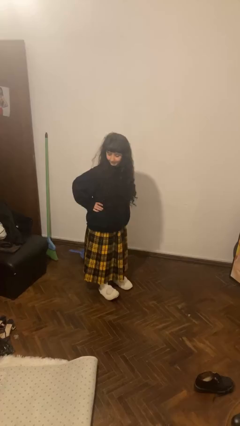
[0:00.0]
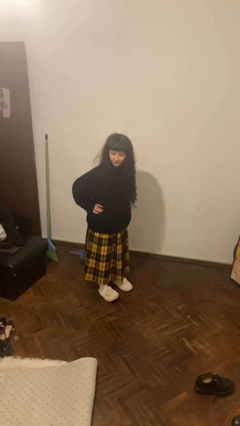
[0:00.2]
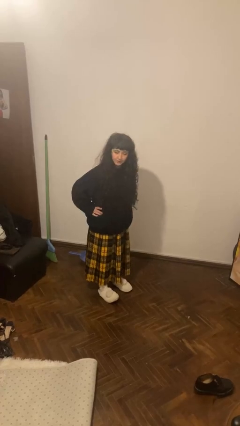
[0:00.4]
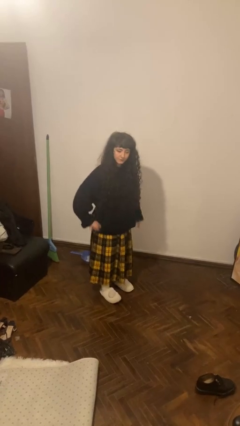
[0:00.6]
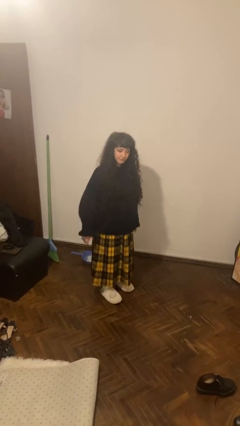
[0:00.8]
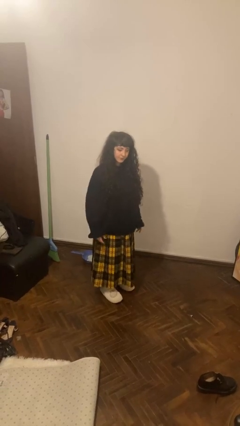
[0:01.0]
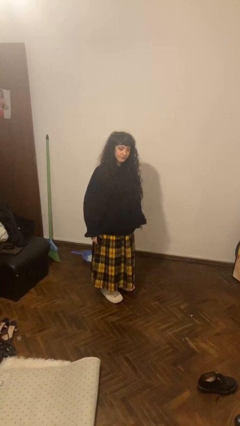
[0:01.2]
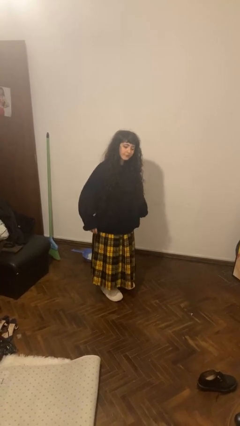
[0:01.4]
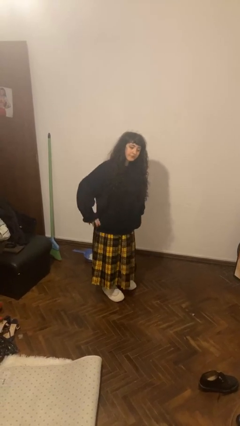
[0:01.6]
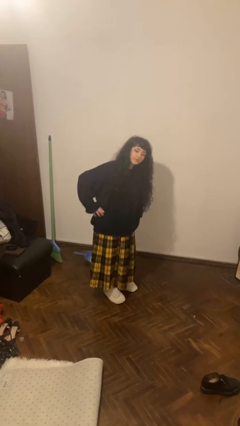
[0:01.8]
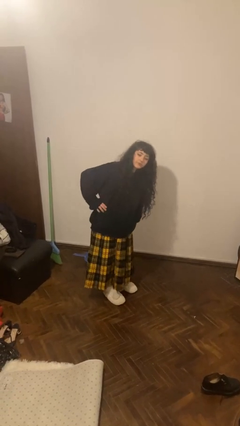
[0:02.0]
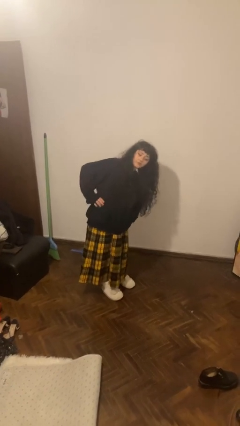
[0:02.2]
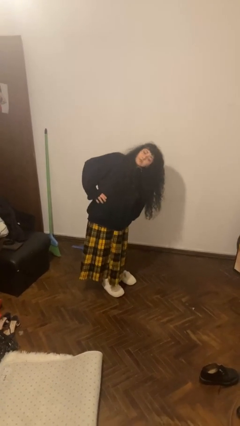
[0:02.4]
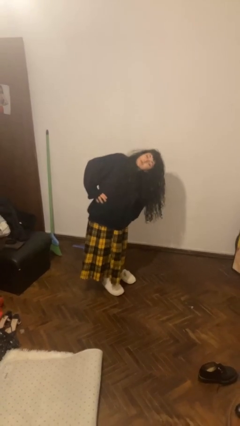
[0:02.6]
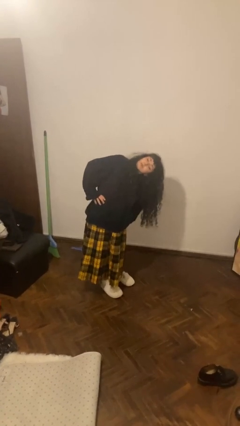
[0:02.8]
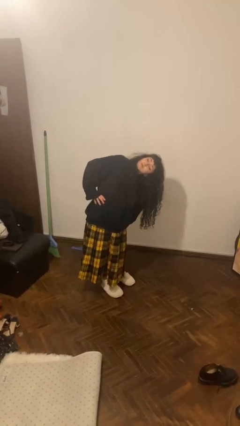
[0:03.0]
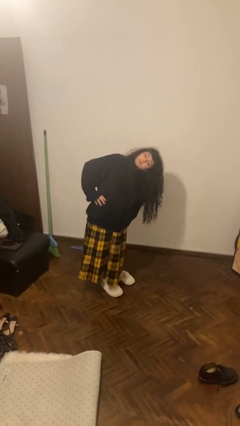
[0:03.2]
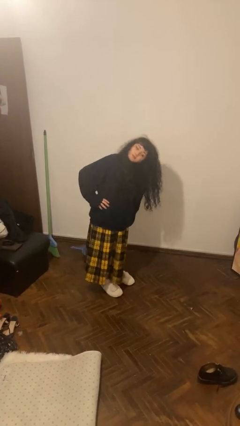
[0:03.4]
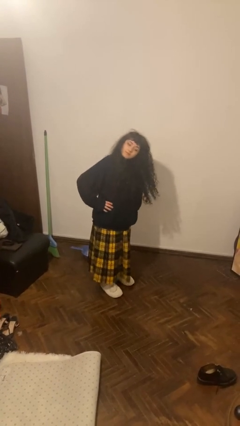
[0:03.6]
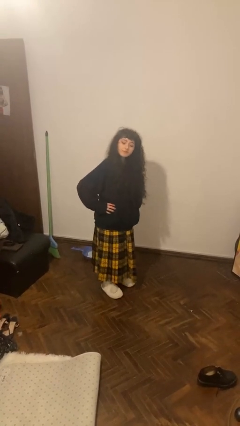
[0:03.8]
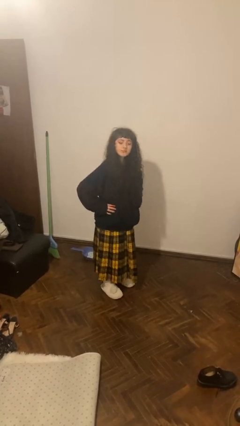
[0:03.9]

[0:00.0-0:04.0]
person stretches arms to side

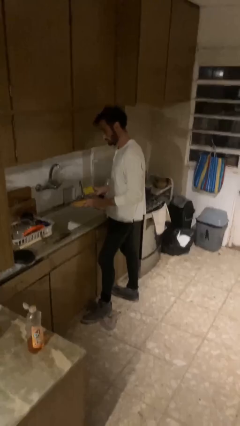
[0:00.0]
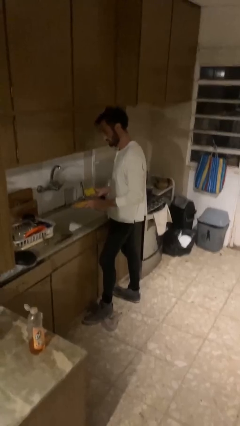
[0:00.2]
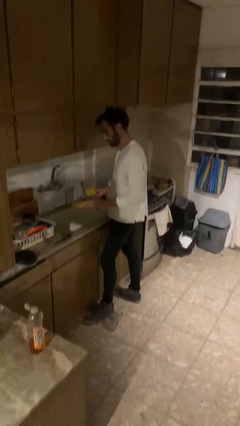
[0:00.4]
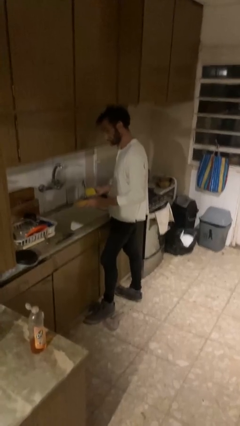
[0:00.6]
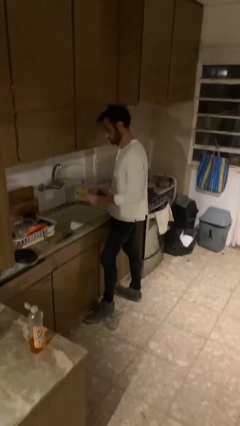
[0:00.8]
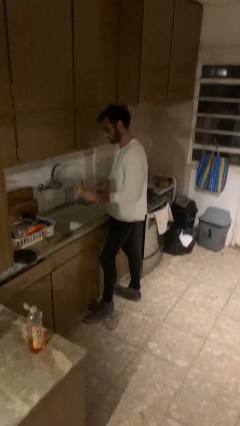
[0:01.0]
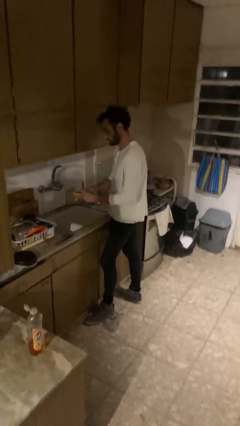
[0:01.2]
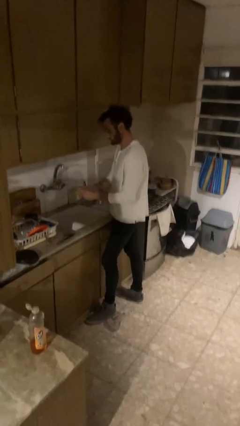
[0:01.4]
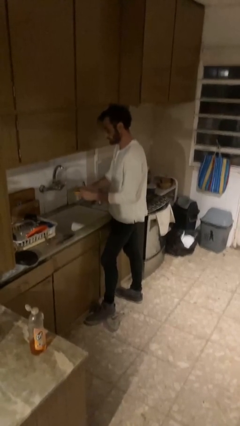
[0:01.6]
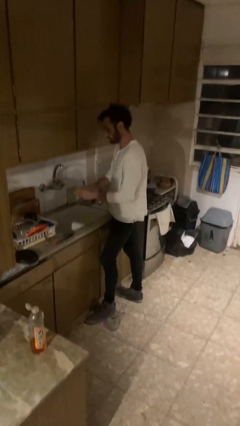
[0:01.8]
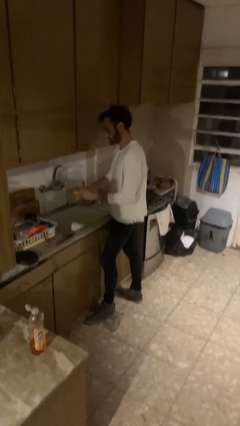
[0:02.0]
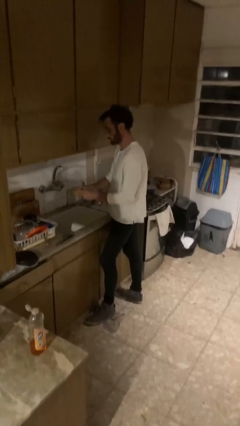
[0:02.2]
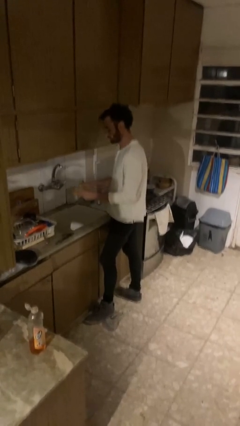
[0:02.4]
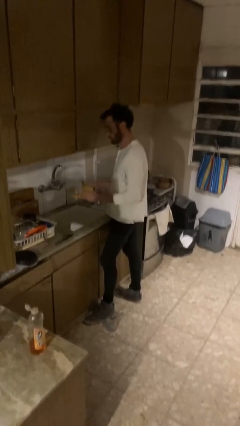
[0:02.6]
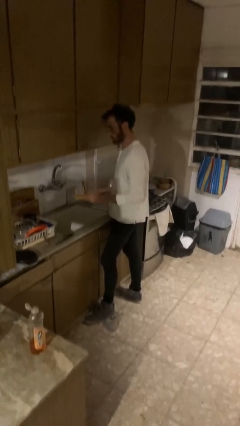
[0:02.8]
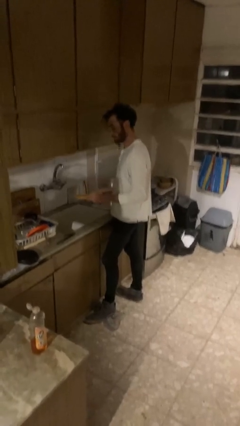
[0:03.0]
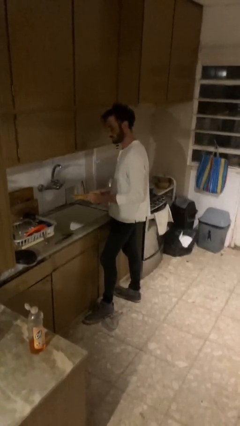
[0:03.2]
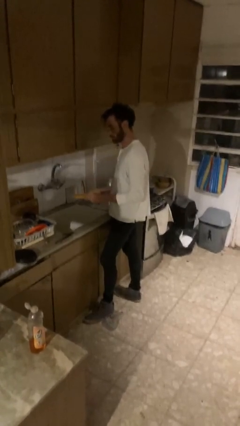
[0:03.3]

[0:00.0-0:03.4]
person washes dish

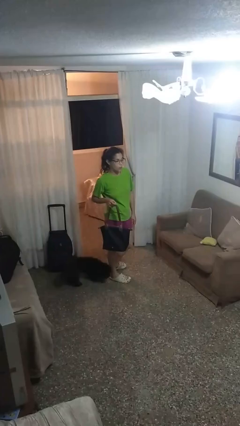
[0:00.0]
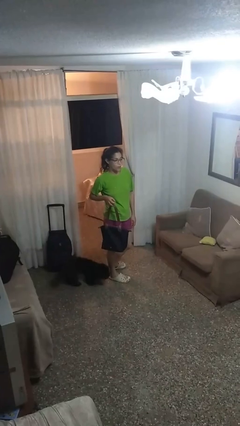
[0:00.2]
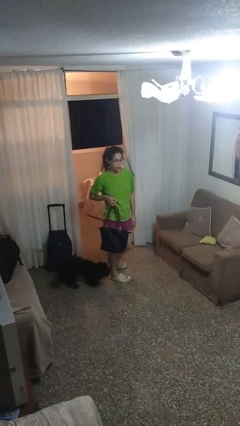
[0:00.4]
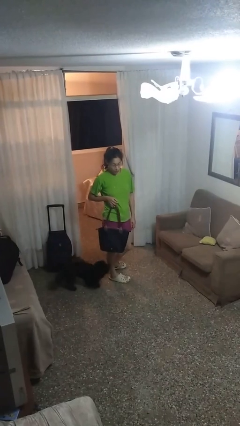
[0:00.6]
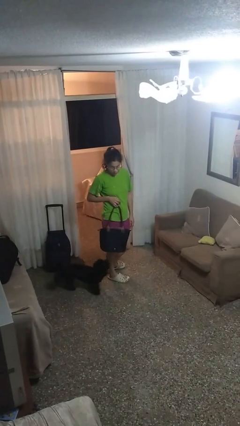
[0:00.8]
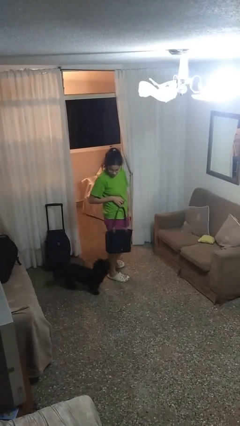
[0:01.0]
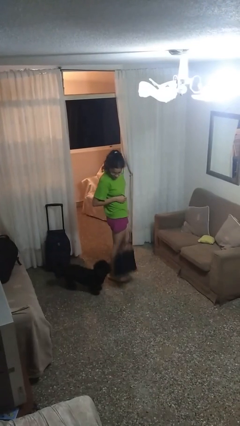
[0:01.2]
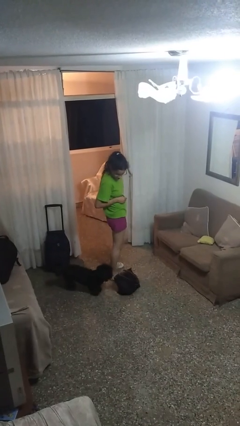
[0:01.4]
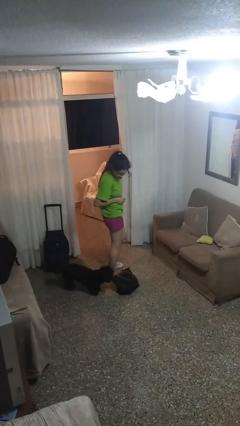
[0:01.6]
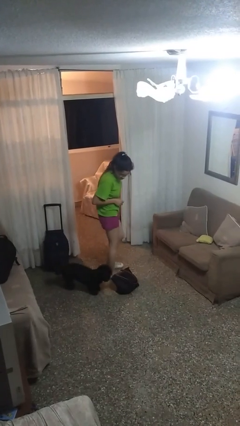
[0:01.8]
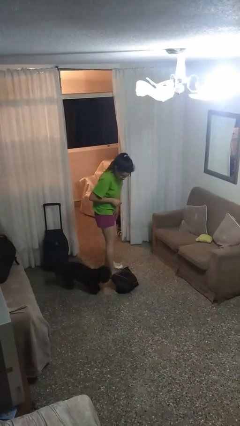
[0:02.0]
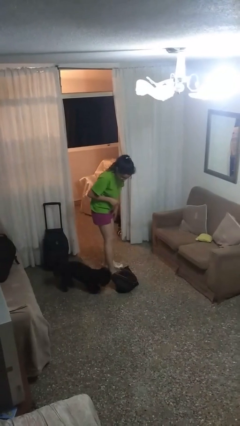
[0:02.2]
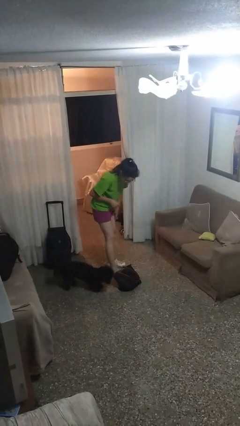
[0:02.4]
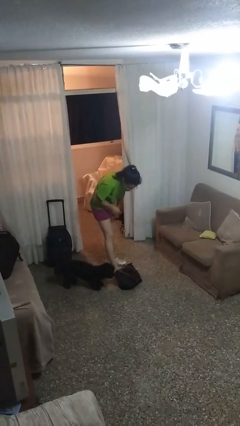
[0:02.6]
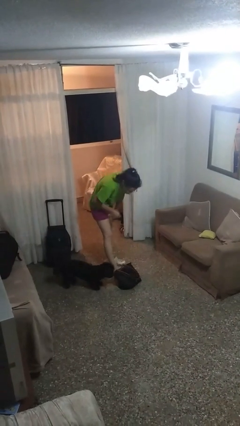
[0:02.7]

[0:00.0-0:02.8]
person drops object

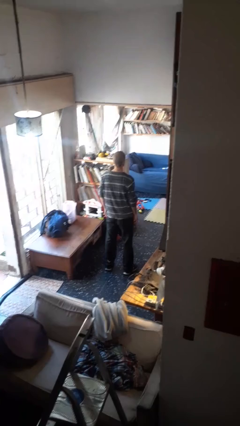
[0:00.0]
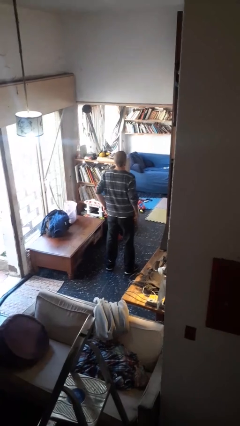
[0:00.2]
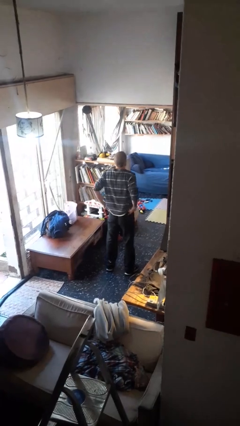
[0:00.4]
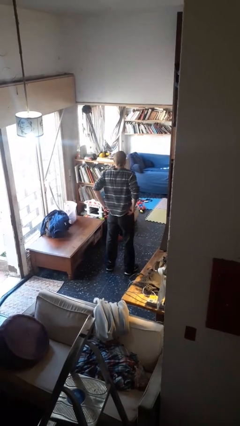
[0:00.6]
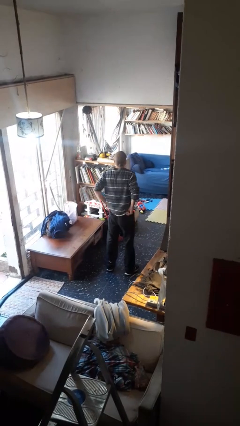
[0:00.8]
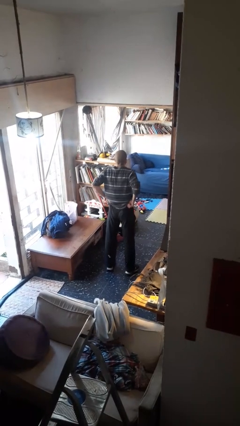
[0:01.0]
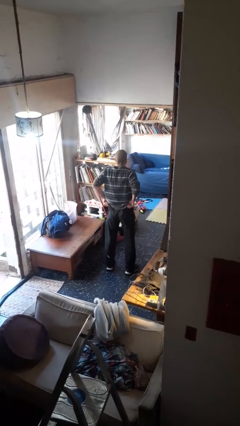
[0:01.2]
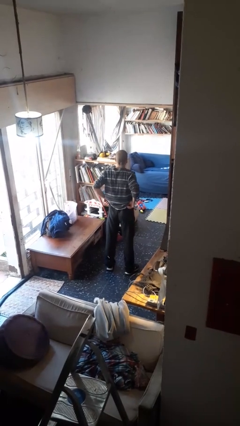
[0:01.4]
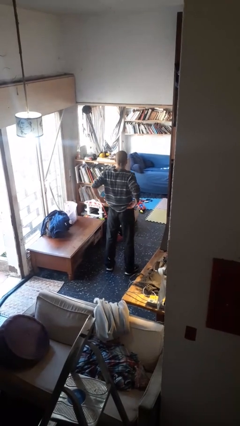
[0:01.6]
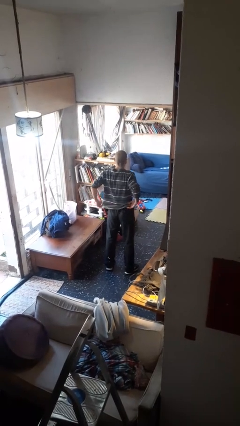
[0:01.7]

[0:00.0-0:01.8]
person hikes up pants

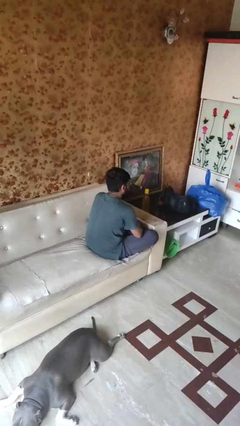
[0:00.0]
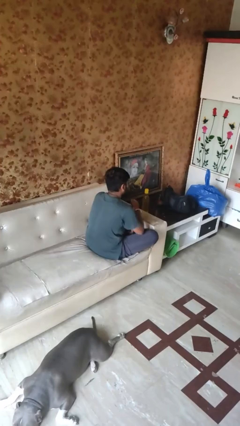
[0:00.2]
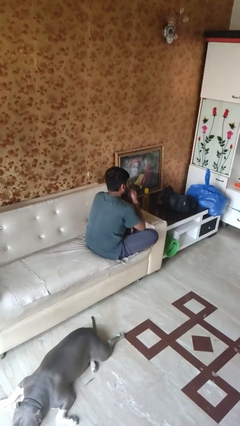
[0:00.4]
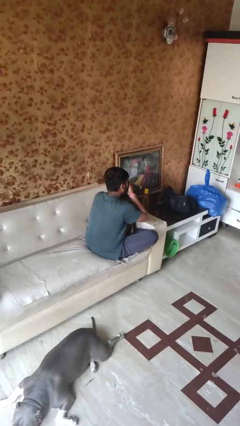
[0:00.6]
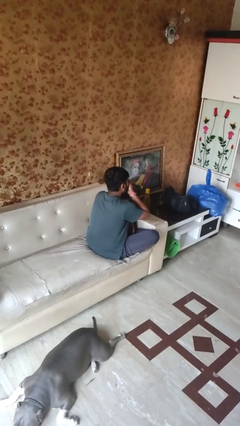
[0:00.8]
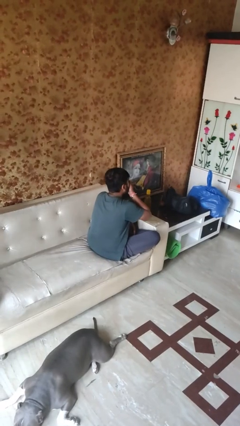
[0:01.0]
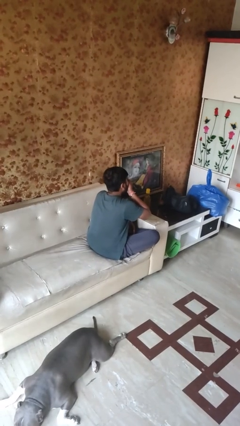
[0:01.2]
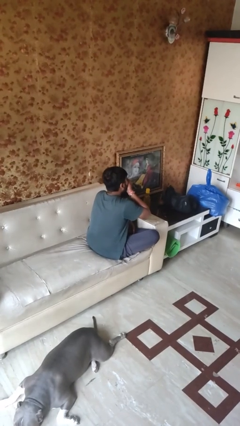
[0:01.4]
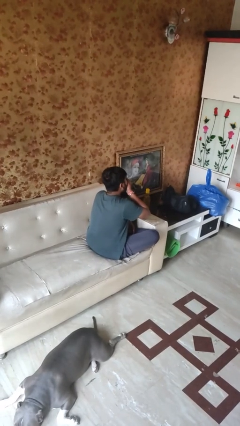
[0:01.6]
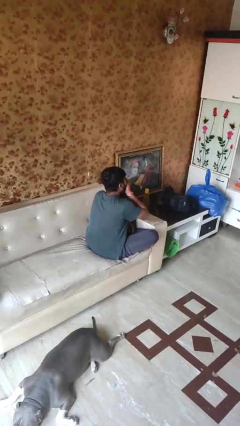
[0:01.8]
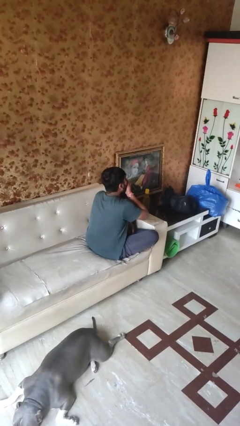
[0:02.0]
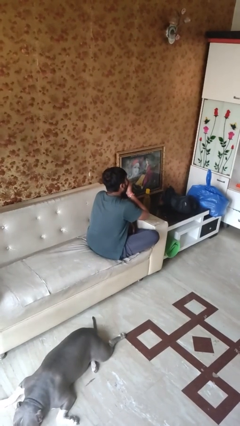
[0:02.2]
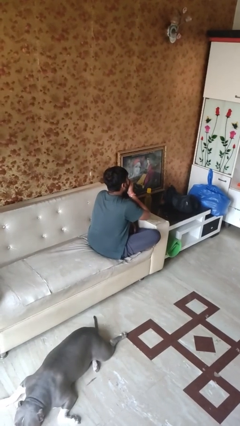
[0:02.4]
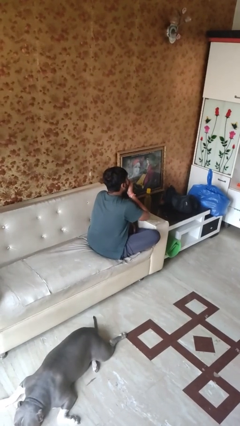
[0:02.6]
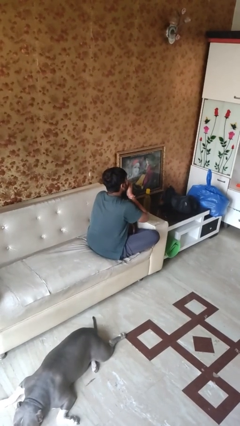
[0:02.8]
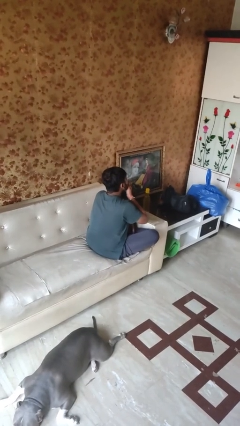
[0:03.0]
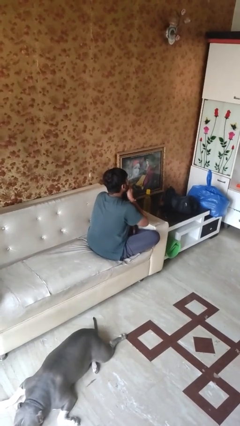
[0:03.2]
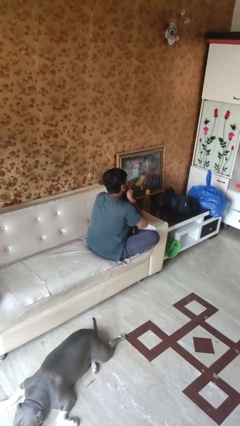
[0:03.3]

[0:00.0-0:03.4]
person yawns

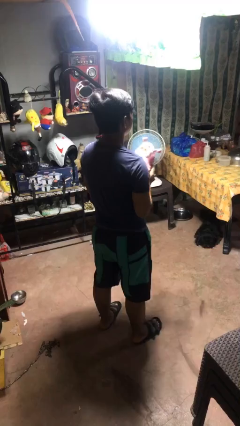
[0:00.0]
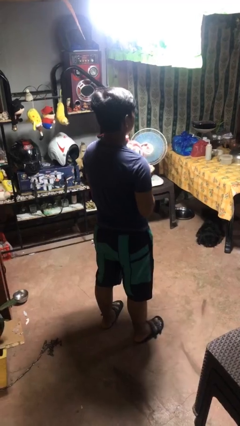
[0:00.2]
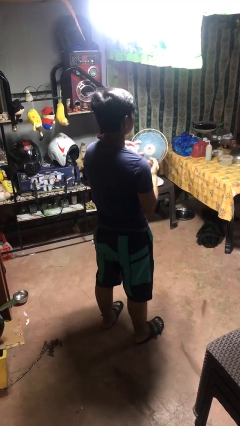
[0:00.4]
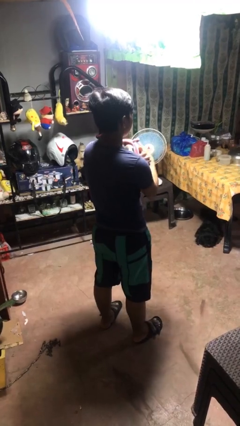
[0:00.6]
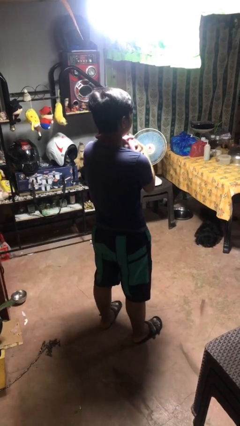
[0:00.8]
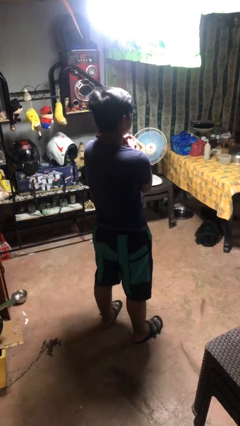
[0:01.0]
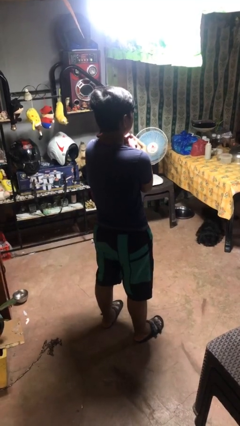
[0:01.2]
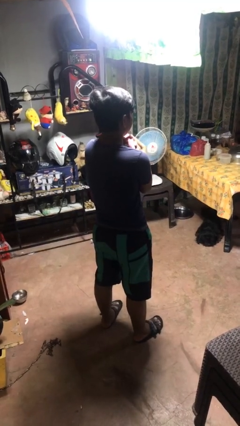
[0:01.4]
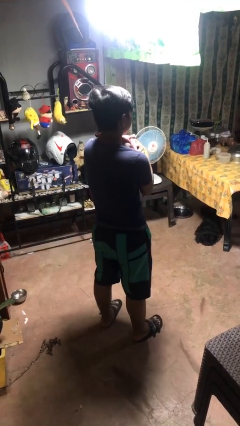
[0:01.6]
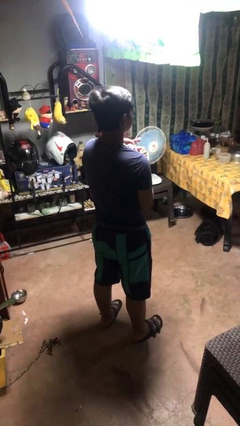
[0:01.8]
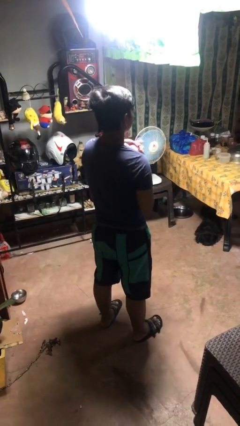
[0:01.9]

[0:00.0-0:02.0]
person hugs stuffed animal
